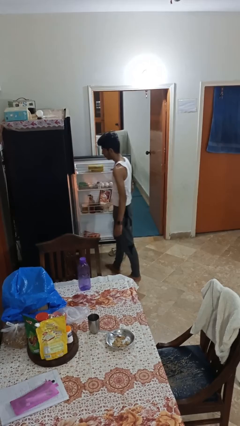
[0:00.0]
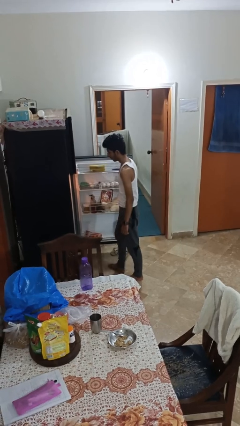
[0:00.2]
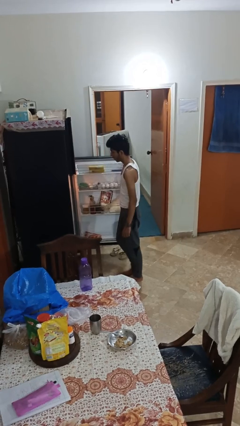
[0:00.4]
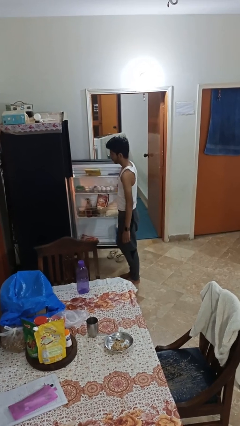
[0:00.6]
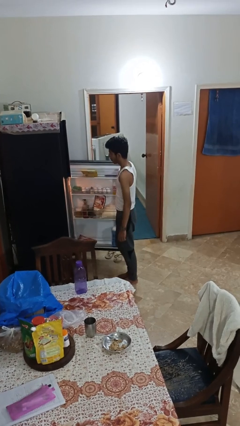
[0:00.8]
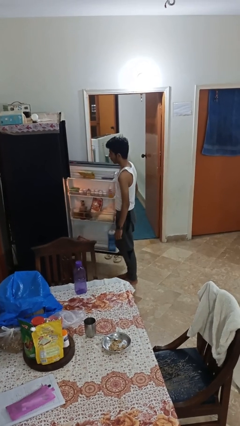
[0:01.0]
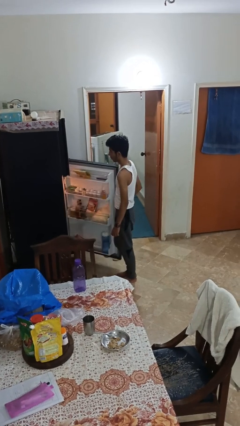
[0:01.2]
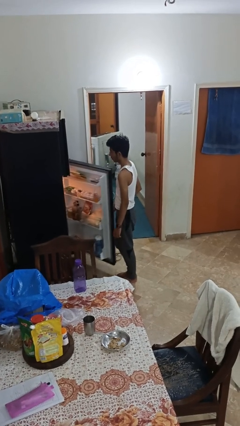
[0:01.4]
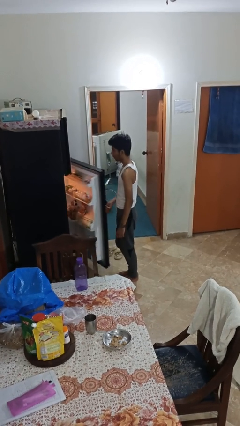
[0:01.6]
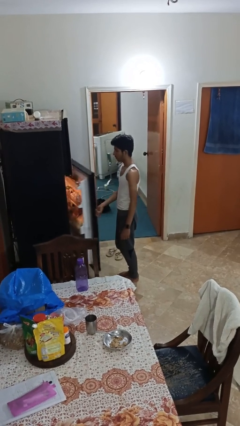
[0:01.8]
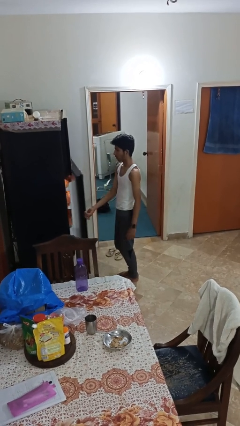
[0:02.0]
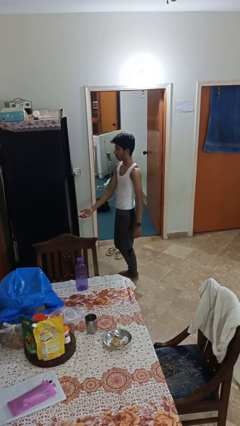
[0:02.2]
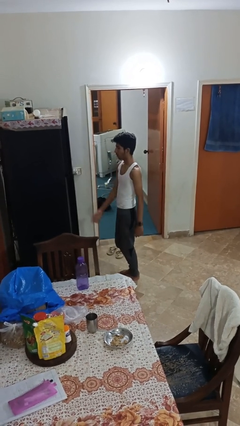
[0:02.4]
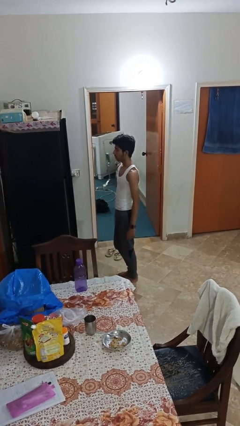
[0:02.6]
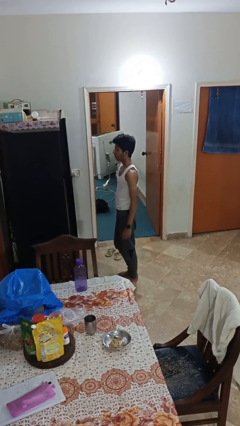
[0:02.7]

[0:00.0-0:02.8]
person closes refrigerator

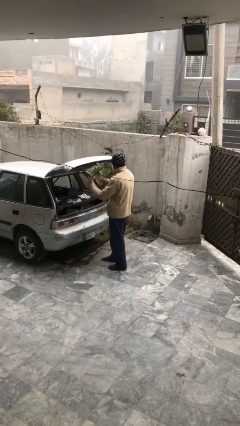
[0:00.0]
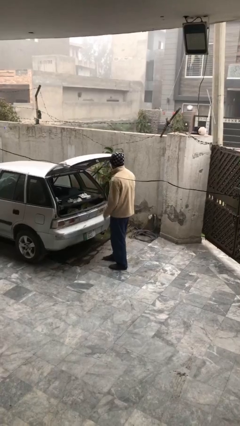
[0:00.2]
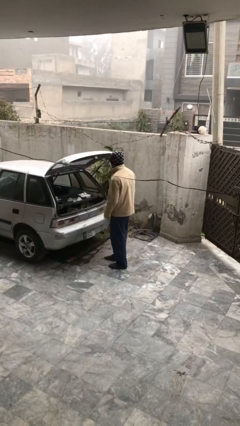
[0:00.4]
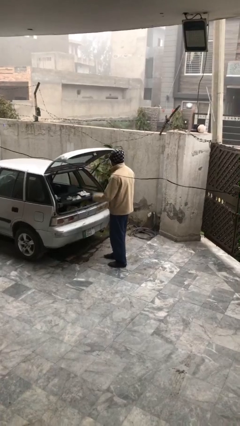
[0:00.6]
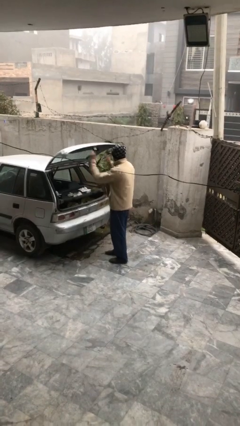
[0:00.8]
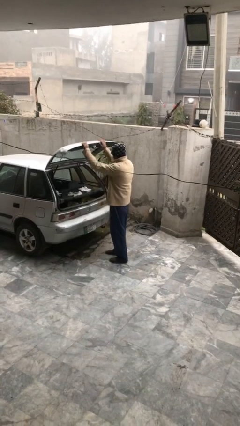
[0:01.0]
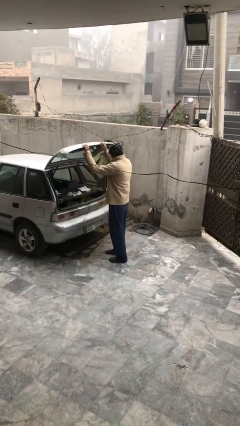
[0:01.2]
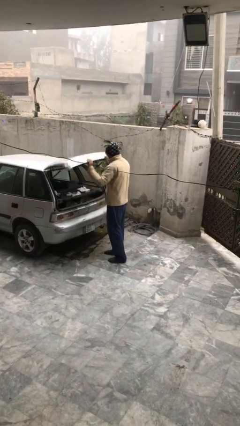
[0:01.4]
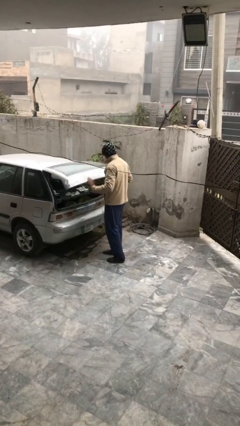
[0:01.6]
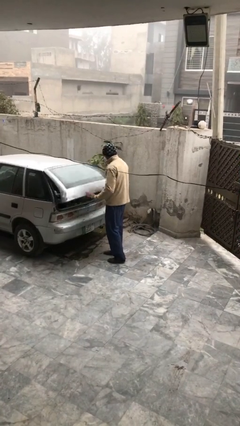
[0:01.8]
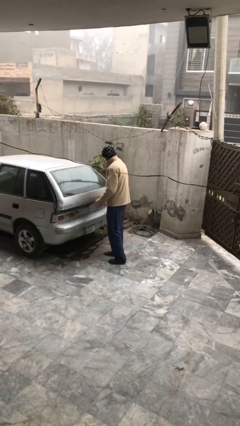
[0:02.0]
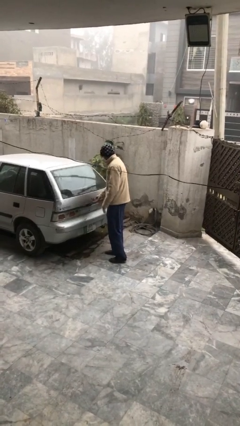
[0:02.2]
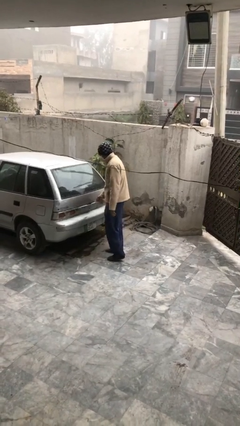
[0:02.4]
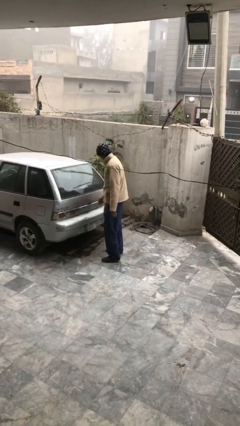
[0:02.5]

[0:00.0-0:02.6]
person closes car trunk

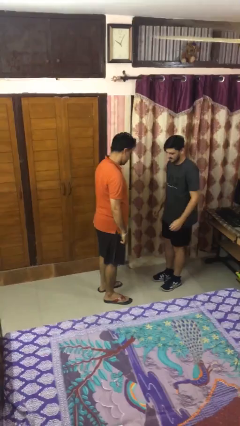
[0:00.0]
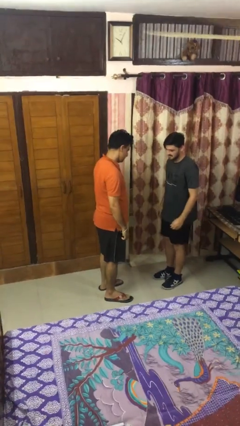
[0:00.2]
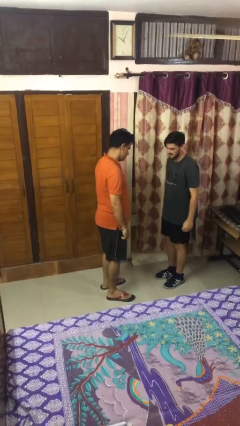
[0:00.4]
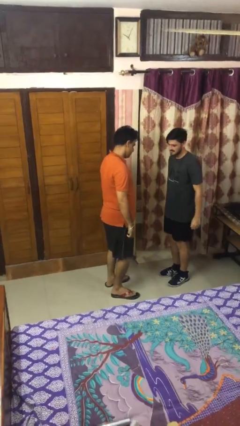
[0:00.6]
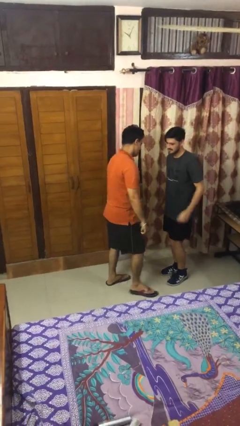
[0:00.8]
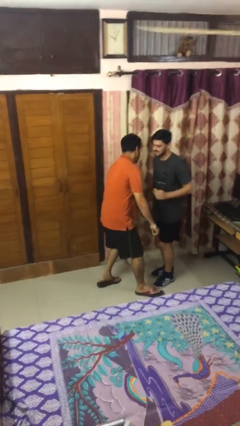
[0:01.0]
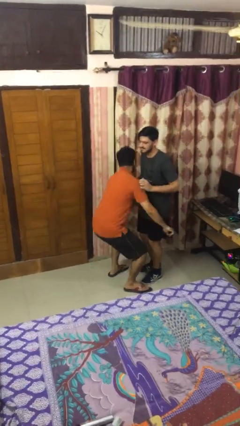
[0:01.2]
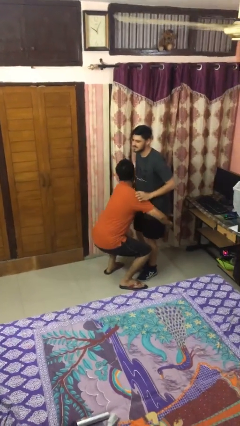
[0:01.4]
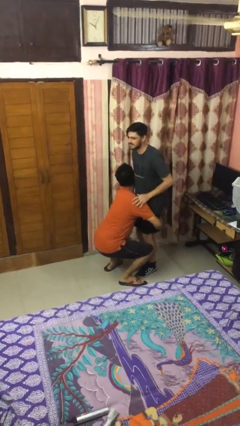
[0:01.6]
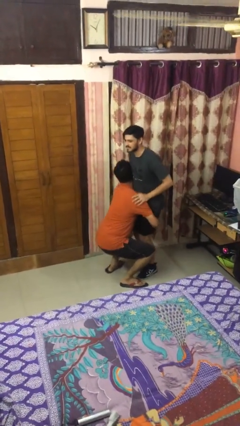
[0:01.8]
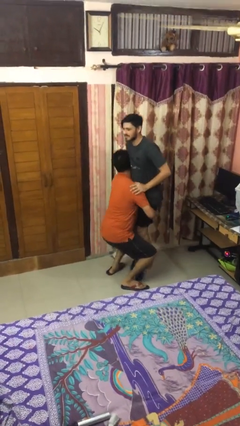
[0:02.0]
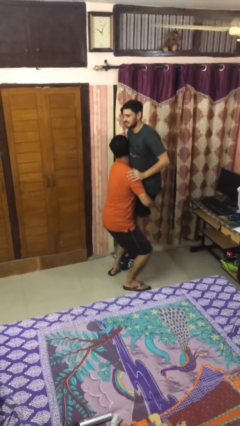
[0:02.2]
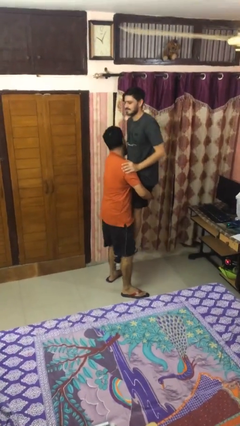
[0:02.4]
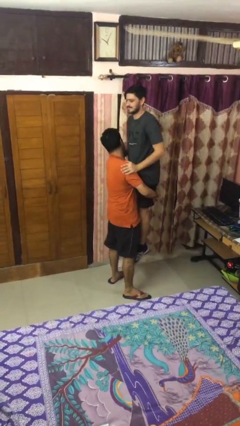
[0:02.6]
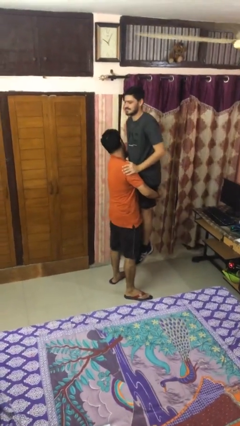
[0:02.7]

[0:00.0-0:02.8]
person picks up person

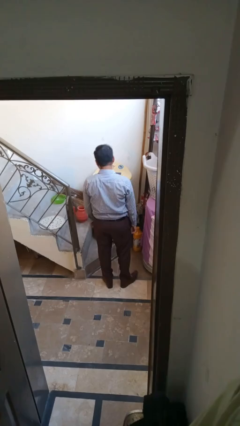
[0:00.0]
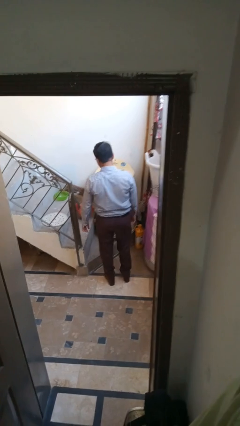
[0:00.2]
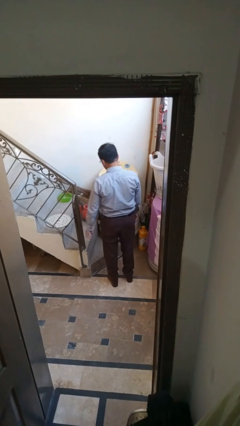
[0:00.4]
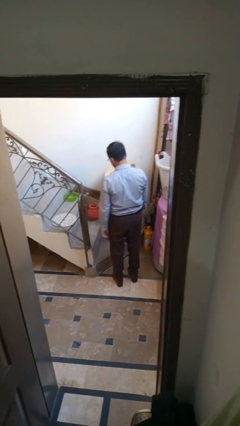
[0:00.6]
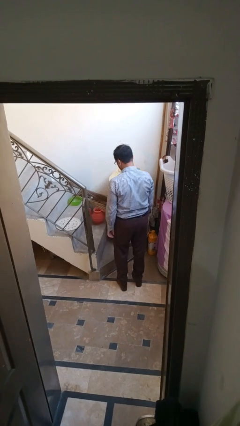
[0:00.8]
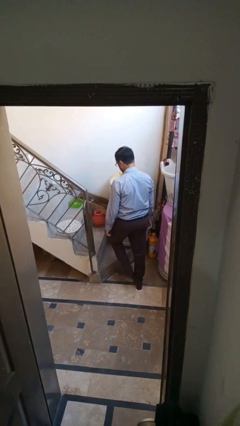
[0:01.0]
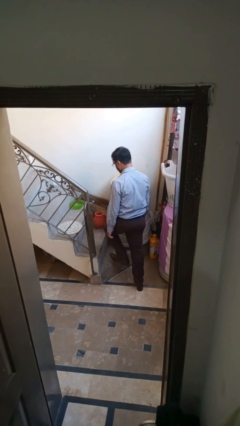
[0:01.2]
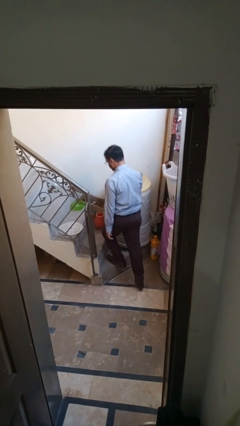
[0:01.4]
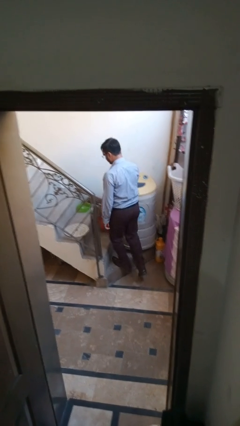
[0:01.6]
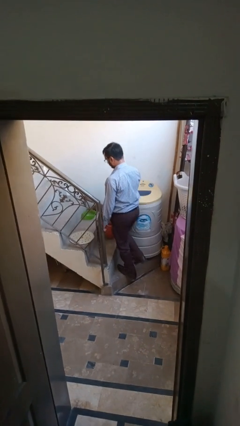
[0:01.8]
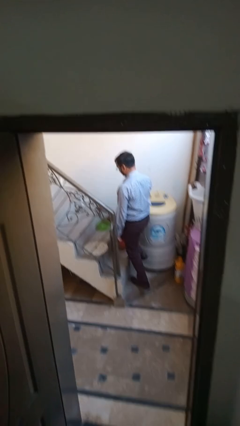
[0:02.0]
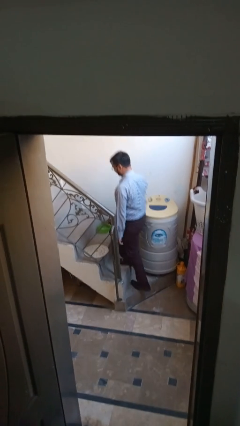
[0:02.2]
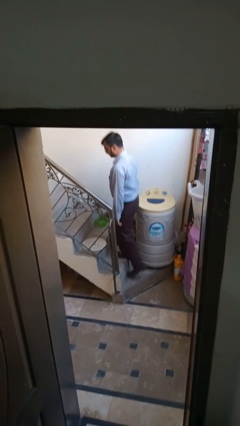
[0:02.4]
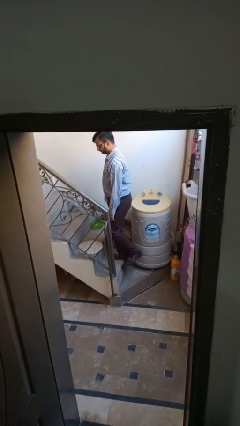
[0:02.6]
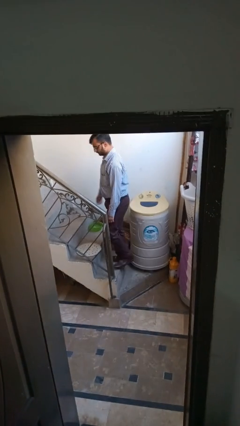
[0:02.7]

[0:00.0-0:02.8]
person climbs up stairs

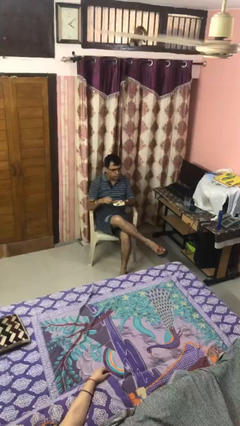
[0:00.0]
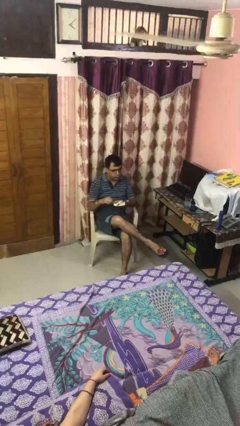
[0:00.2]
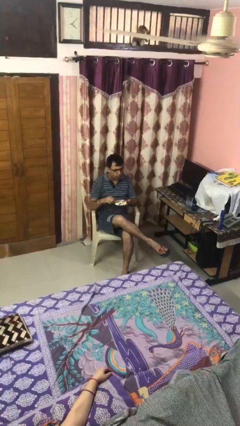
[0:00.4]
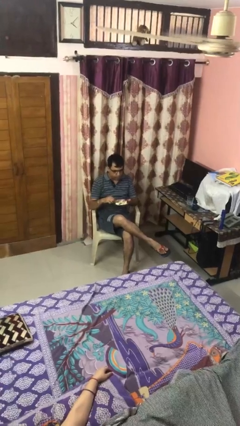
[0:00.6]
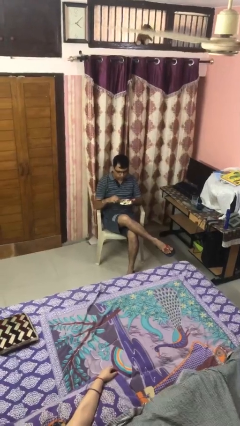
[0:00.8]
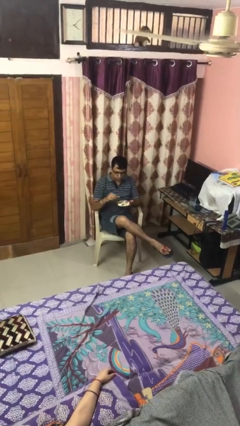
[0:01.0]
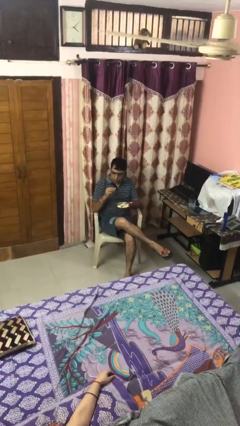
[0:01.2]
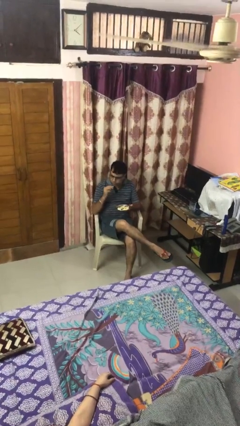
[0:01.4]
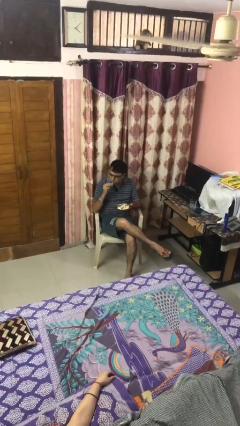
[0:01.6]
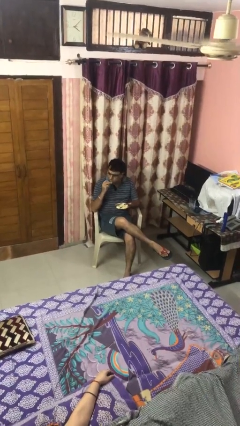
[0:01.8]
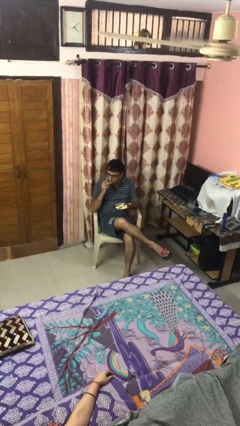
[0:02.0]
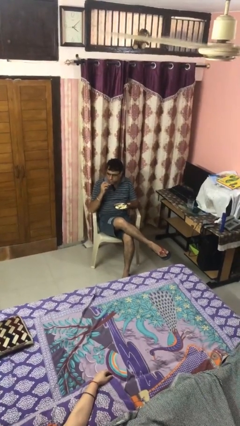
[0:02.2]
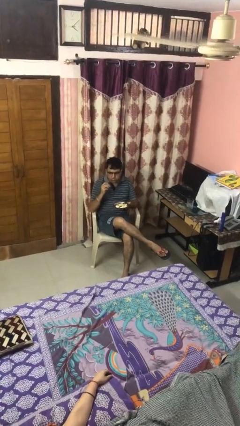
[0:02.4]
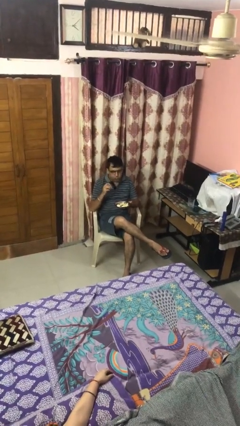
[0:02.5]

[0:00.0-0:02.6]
person eats with hands

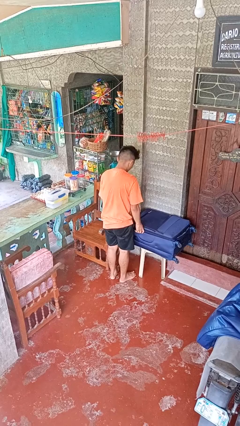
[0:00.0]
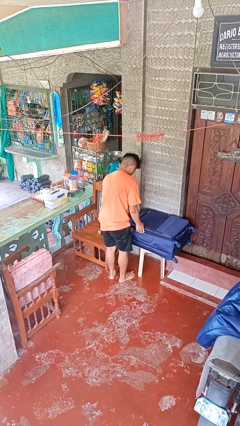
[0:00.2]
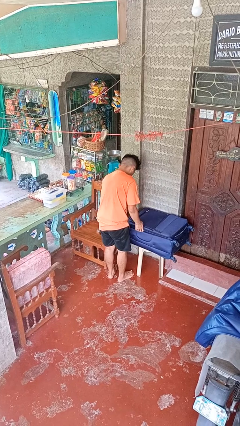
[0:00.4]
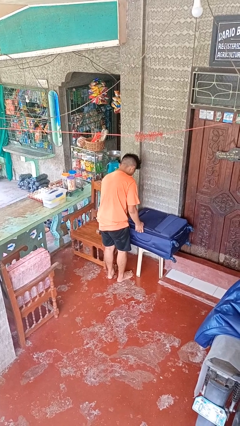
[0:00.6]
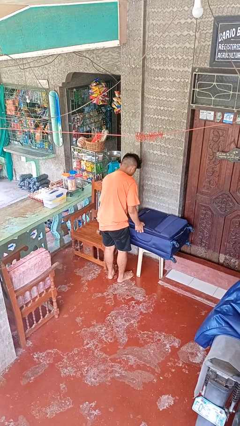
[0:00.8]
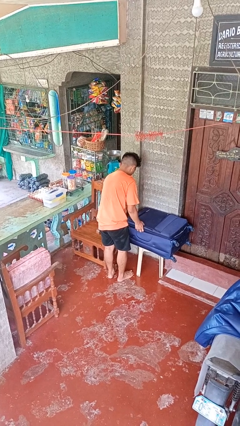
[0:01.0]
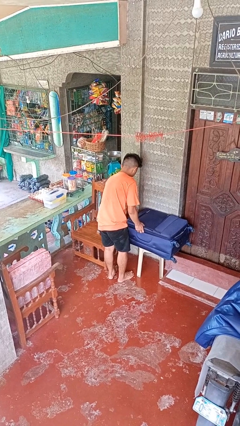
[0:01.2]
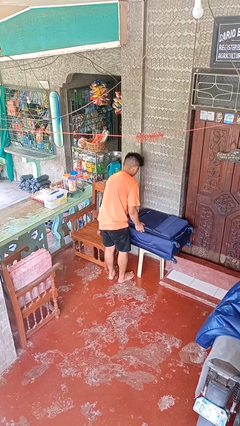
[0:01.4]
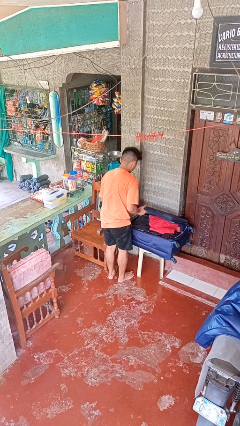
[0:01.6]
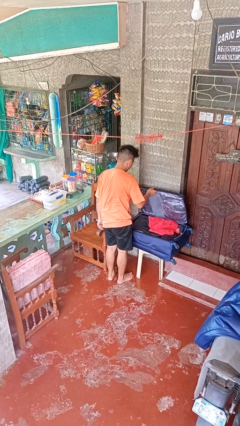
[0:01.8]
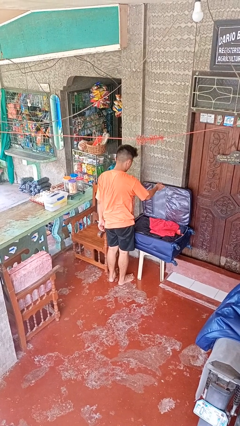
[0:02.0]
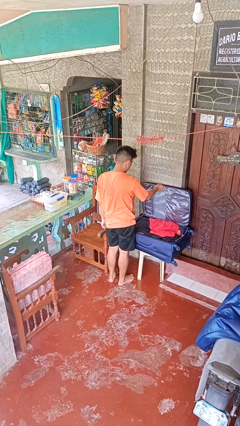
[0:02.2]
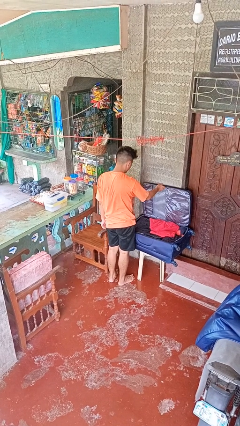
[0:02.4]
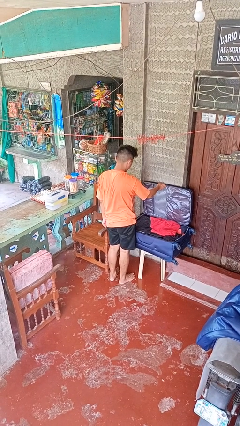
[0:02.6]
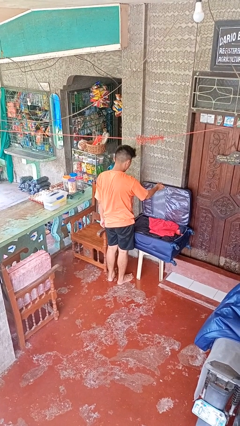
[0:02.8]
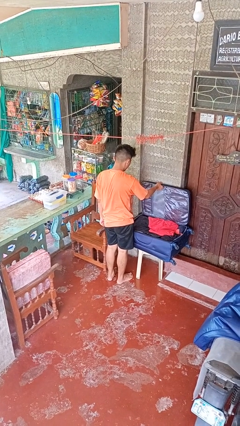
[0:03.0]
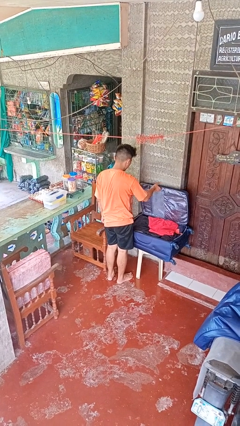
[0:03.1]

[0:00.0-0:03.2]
person opens suitcase

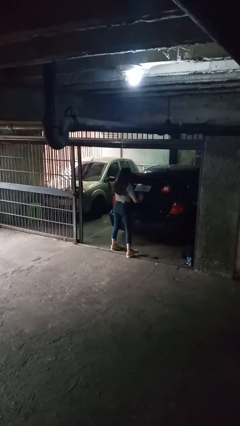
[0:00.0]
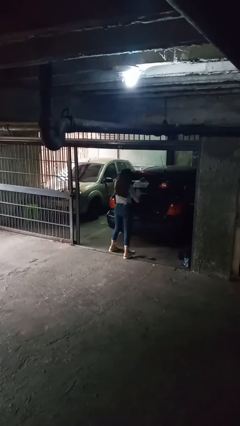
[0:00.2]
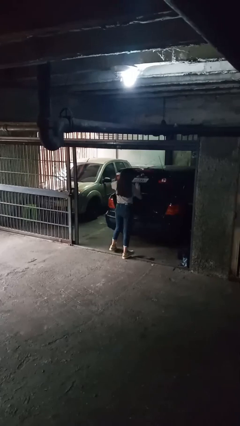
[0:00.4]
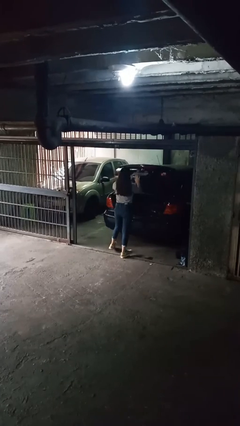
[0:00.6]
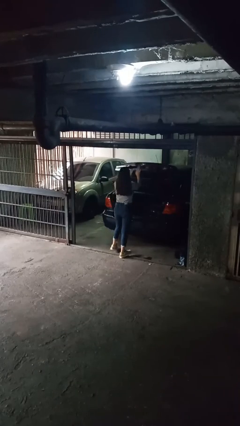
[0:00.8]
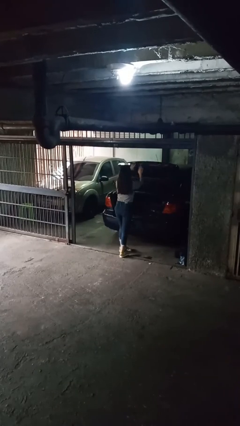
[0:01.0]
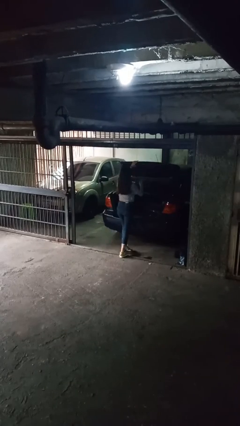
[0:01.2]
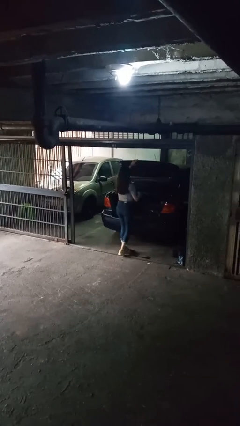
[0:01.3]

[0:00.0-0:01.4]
person opens car trunk
